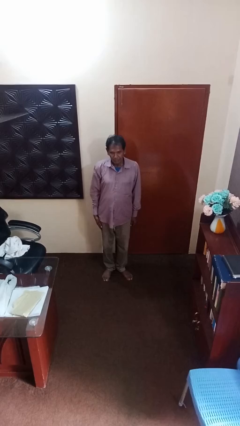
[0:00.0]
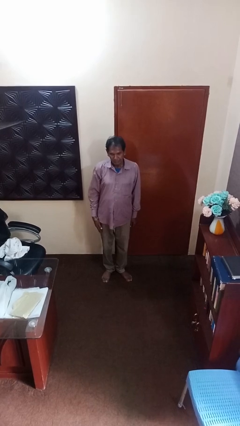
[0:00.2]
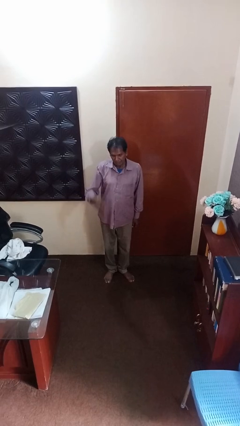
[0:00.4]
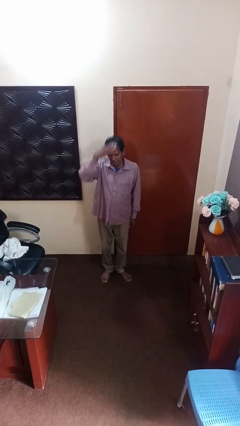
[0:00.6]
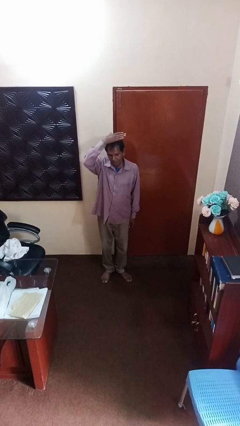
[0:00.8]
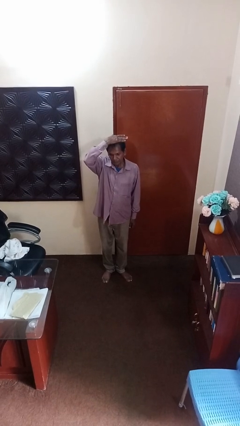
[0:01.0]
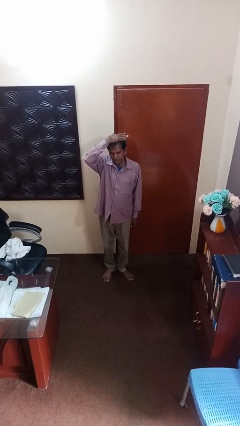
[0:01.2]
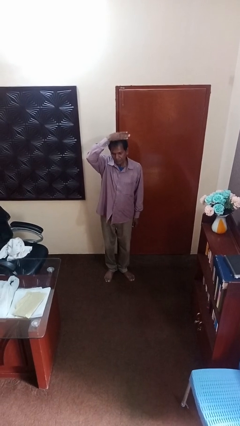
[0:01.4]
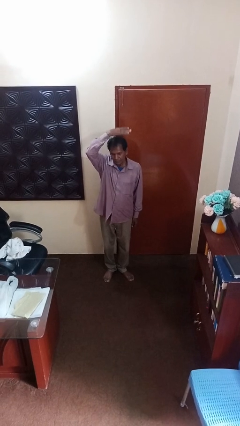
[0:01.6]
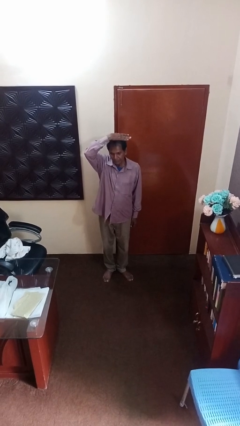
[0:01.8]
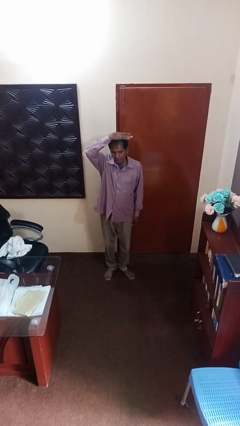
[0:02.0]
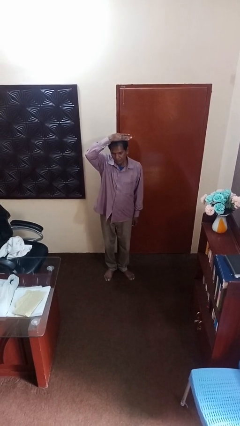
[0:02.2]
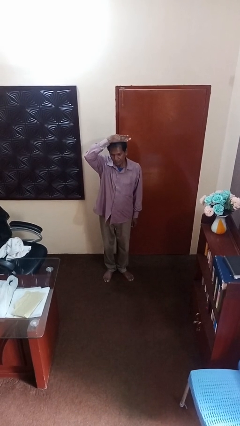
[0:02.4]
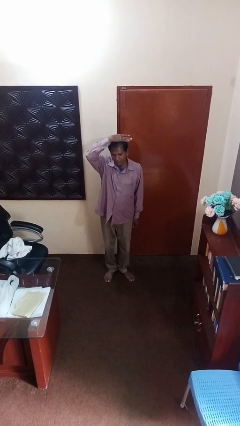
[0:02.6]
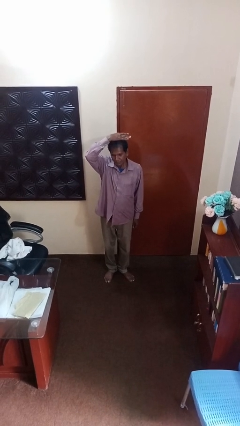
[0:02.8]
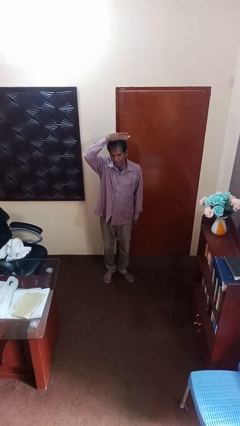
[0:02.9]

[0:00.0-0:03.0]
person pats head

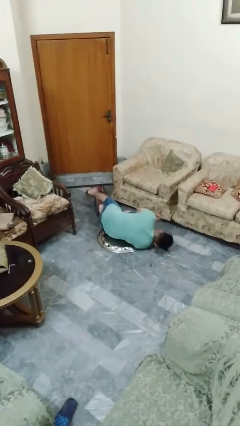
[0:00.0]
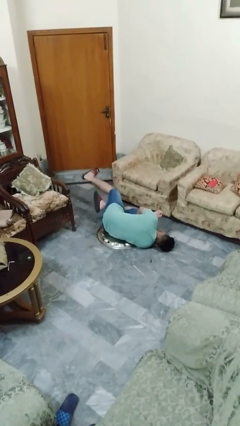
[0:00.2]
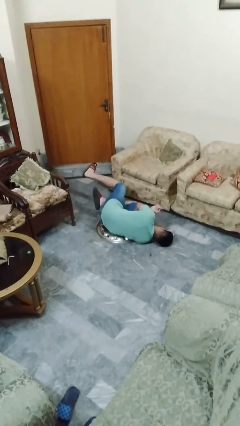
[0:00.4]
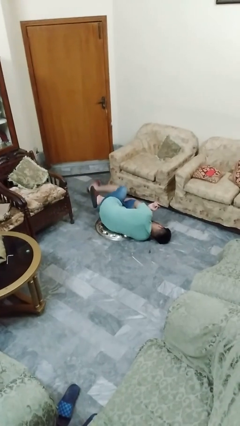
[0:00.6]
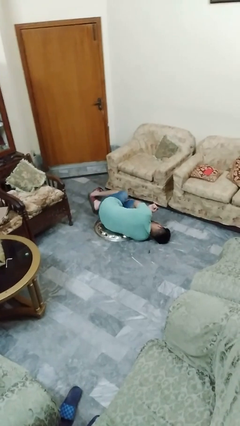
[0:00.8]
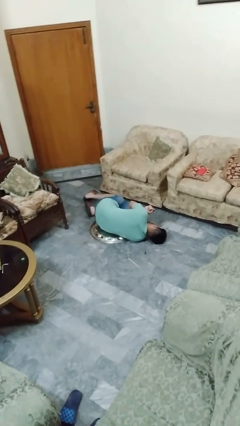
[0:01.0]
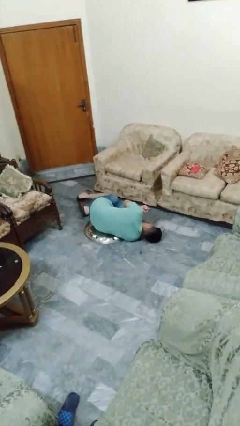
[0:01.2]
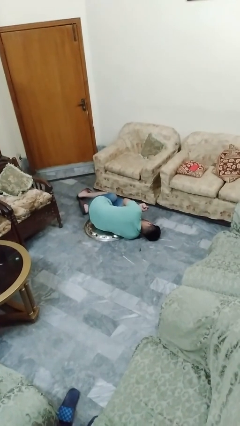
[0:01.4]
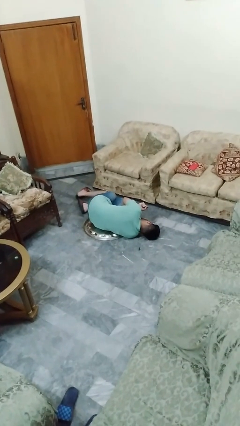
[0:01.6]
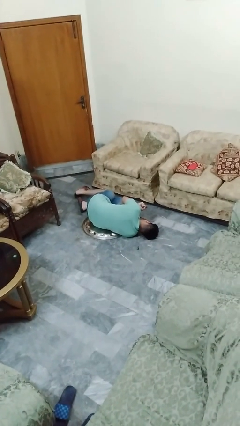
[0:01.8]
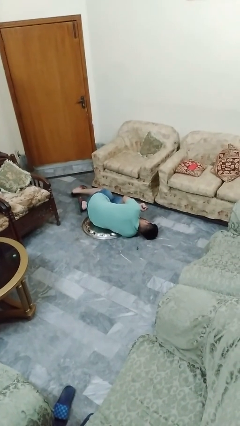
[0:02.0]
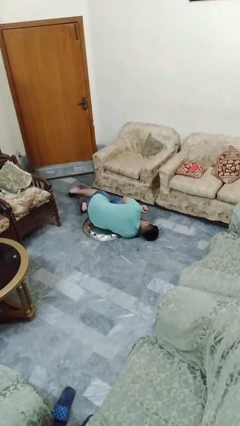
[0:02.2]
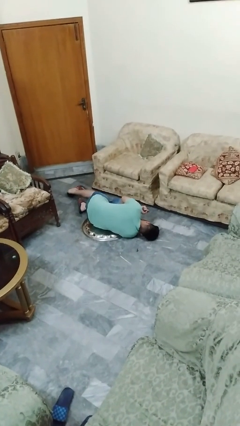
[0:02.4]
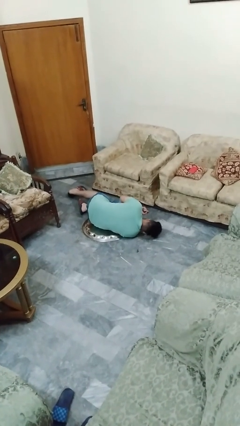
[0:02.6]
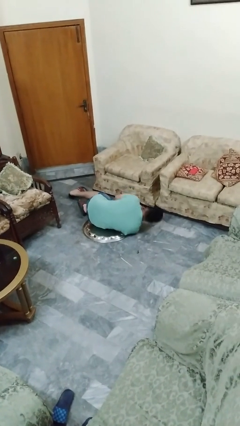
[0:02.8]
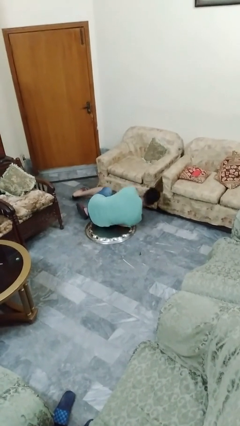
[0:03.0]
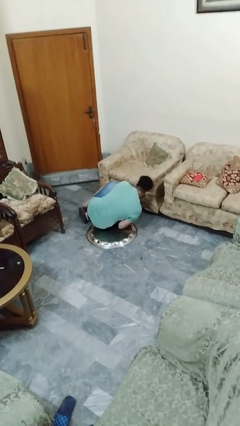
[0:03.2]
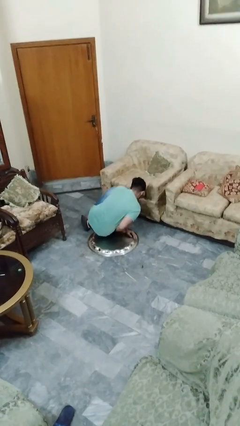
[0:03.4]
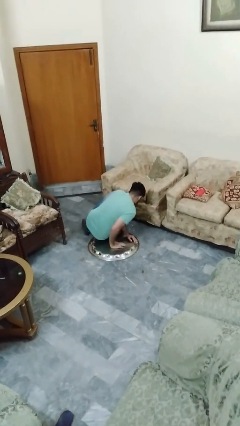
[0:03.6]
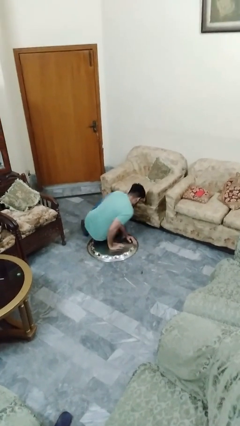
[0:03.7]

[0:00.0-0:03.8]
person lies down on floor

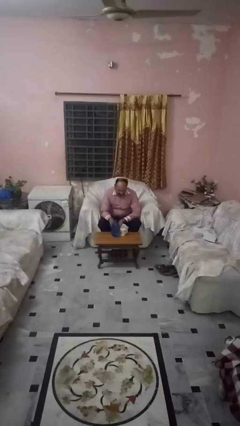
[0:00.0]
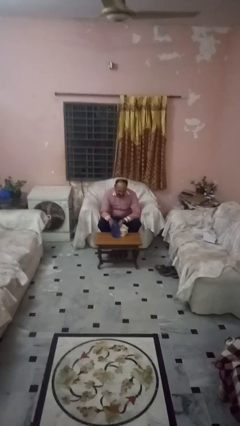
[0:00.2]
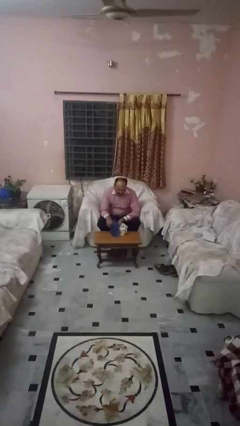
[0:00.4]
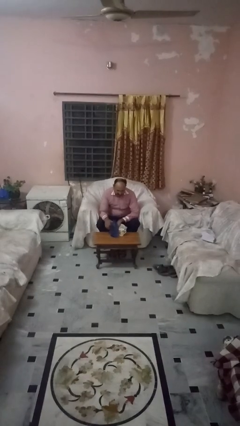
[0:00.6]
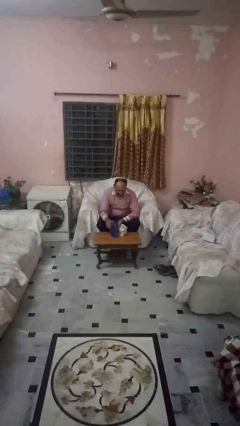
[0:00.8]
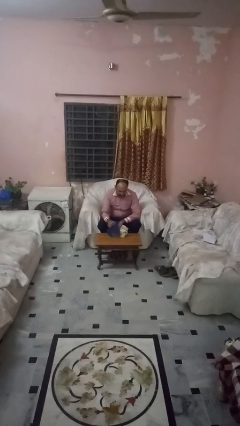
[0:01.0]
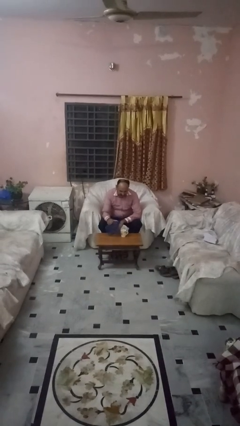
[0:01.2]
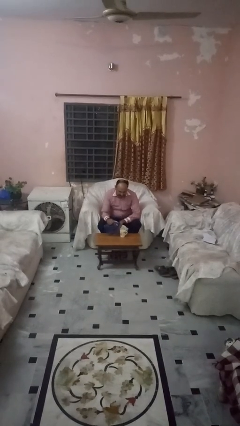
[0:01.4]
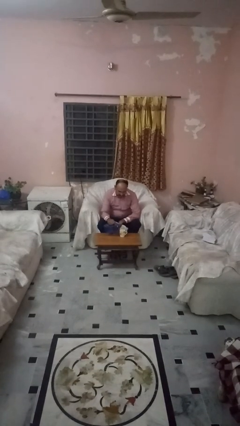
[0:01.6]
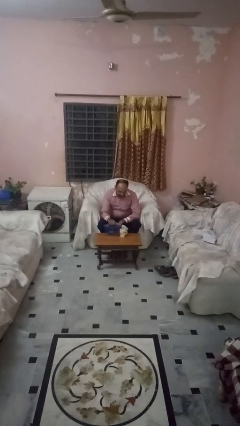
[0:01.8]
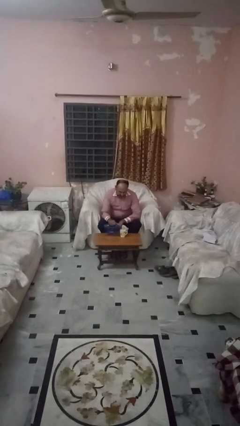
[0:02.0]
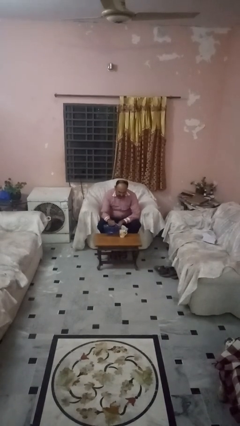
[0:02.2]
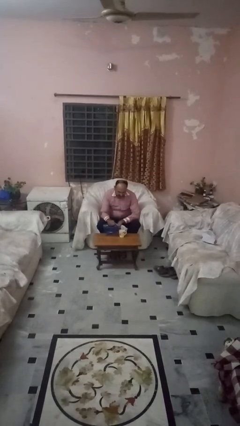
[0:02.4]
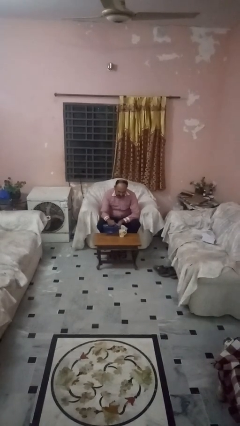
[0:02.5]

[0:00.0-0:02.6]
person pours liquid into cup

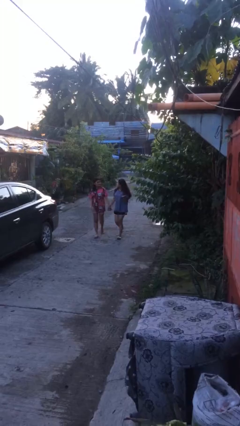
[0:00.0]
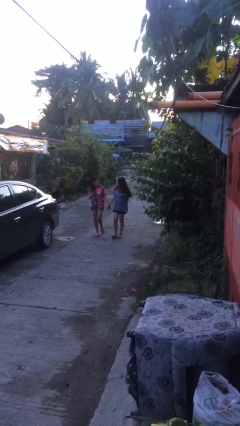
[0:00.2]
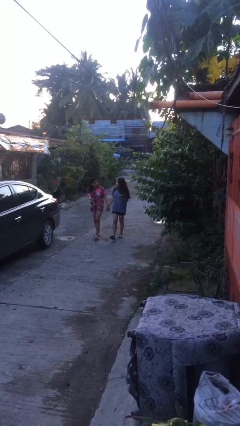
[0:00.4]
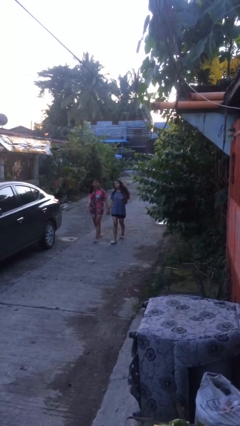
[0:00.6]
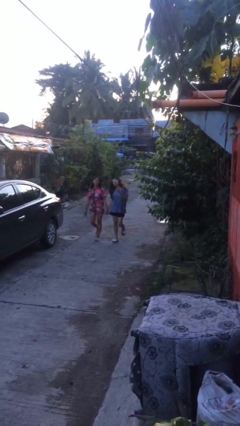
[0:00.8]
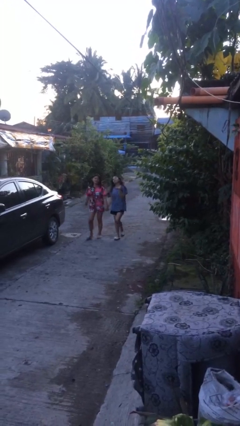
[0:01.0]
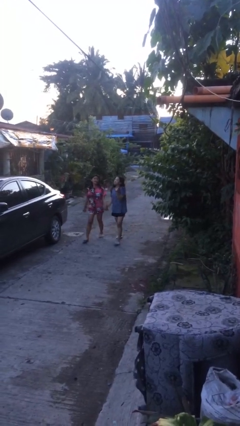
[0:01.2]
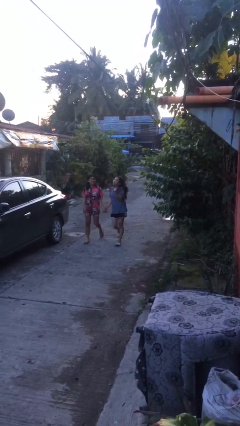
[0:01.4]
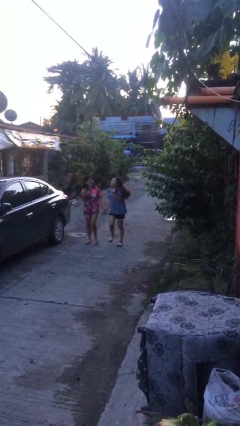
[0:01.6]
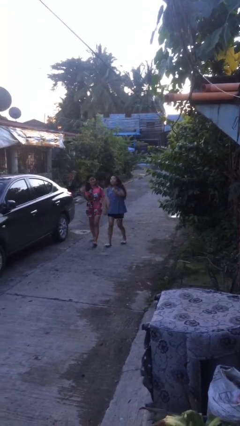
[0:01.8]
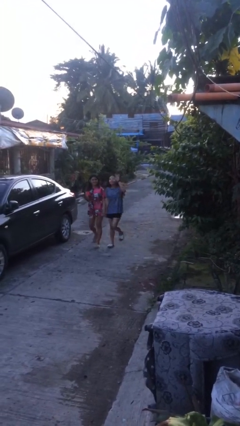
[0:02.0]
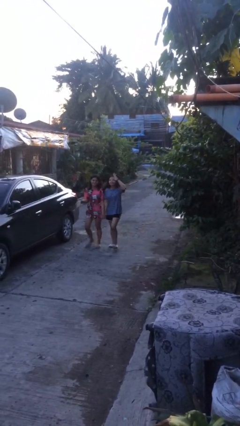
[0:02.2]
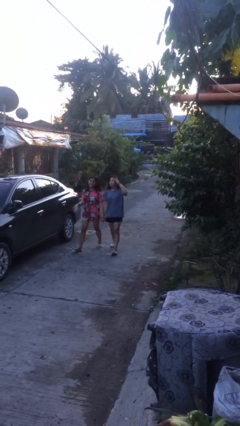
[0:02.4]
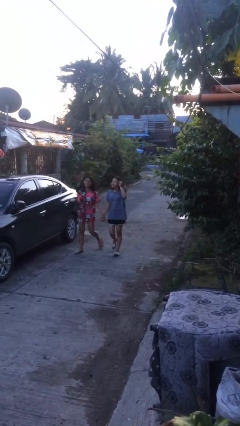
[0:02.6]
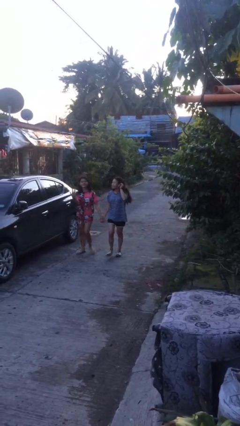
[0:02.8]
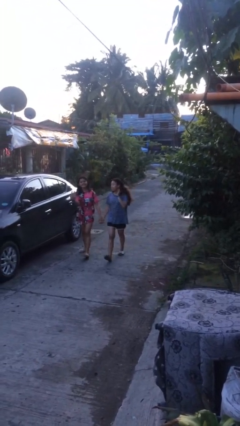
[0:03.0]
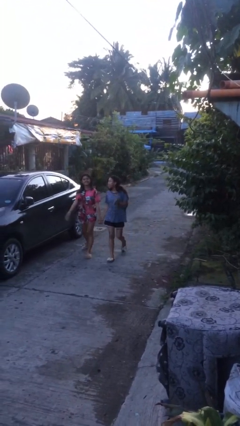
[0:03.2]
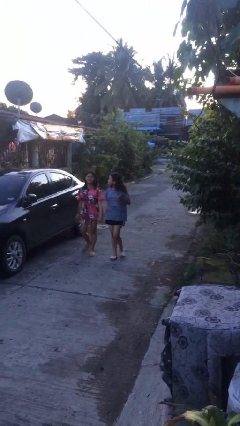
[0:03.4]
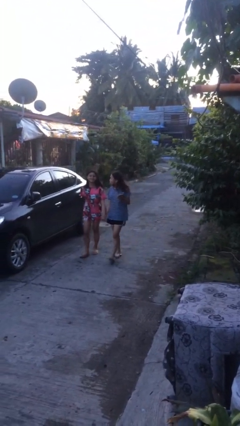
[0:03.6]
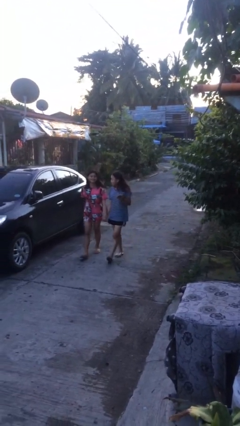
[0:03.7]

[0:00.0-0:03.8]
person holds hand

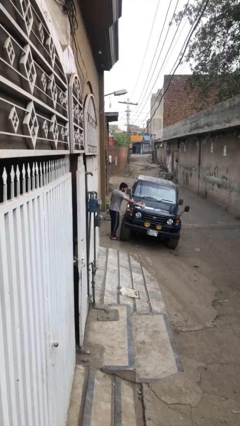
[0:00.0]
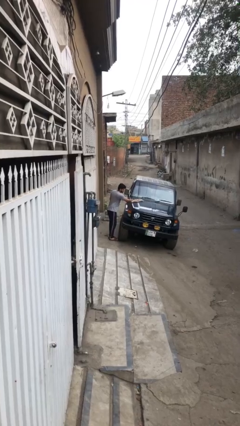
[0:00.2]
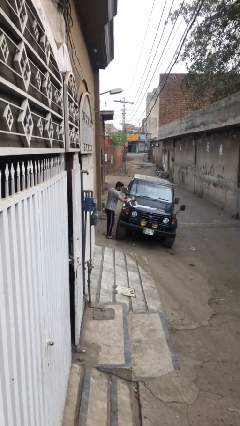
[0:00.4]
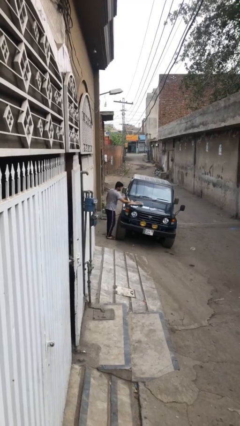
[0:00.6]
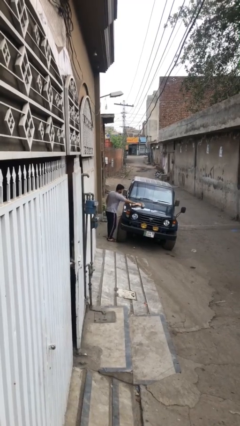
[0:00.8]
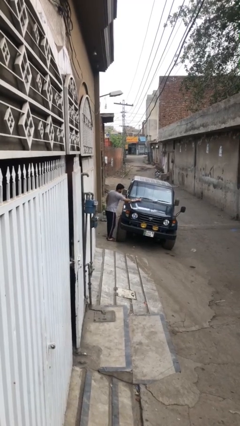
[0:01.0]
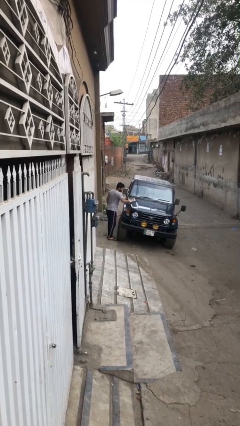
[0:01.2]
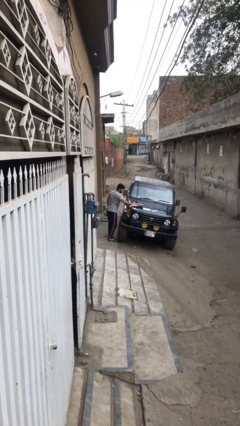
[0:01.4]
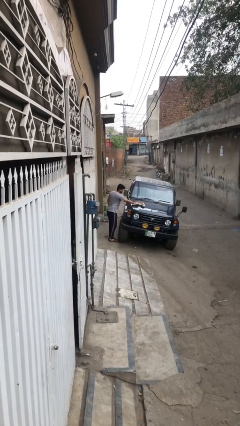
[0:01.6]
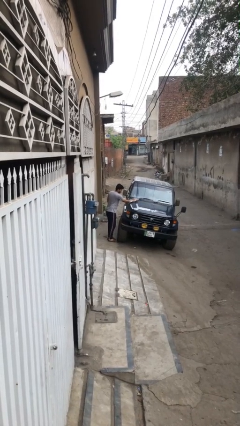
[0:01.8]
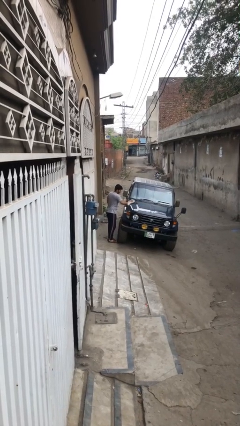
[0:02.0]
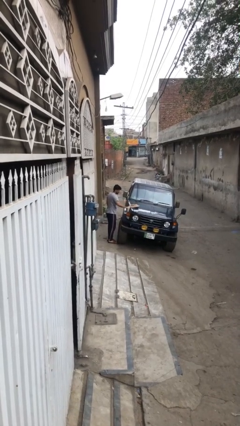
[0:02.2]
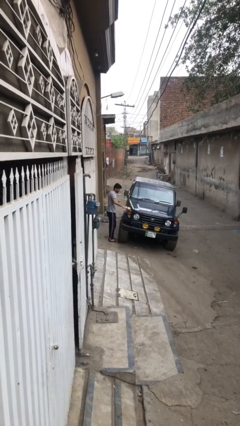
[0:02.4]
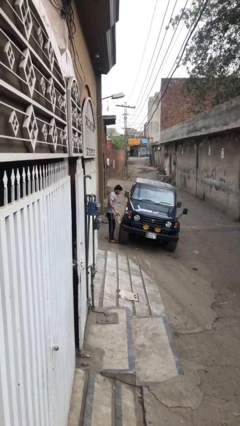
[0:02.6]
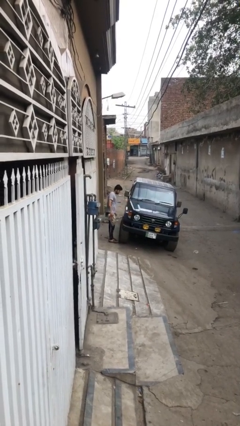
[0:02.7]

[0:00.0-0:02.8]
person polishes car with rag

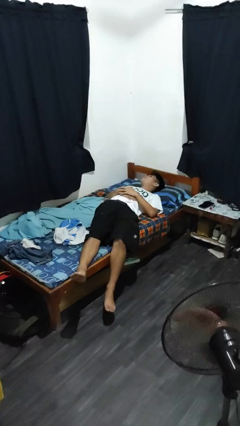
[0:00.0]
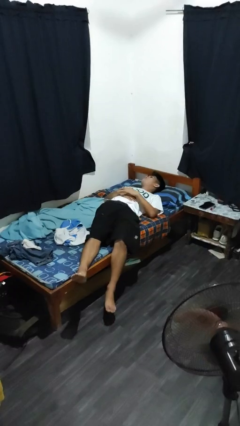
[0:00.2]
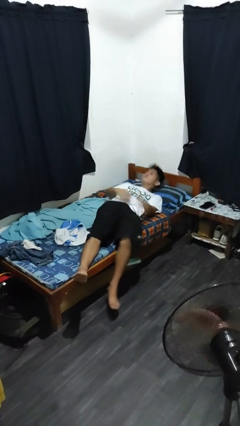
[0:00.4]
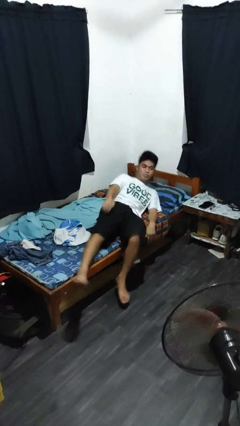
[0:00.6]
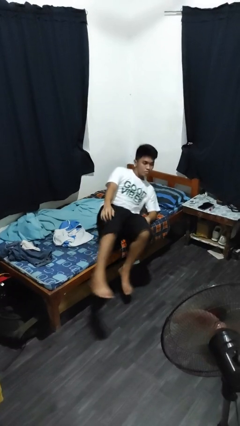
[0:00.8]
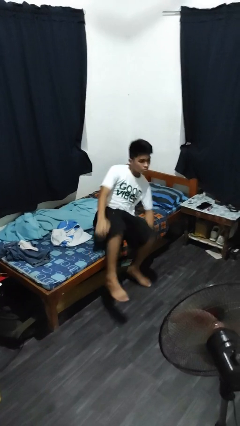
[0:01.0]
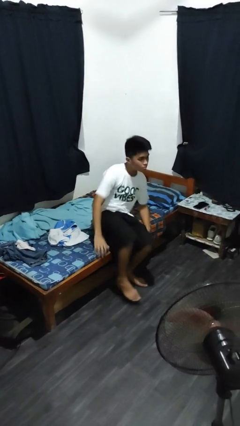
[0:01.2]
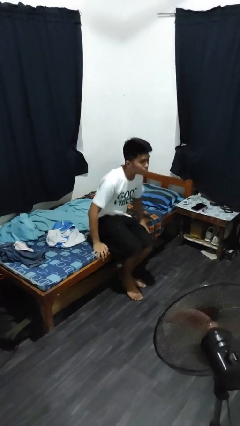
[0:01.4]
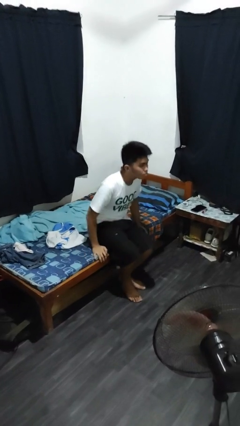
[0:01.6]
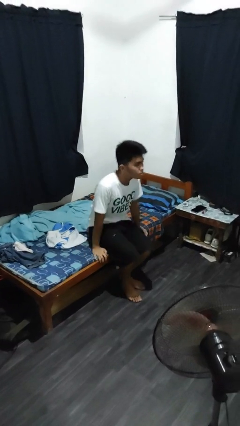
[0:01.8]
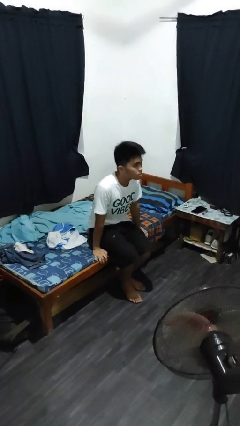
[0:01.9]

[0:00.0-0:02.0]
person stands up
